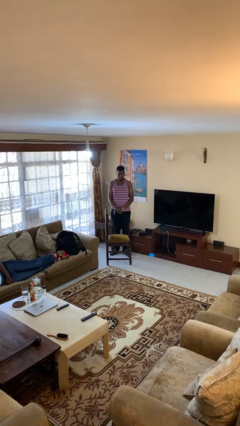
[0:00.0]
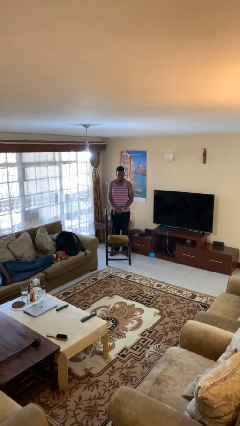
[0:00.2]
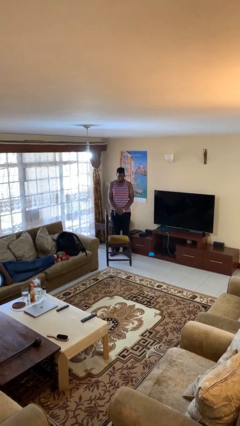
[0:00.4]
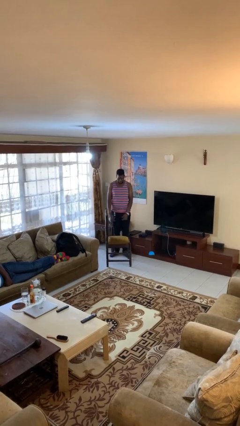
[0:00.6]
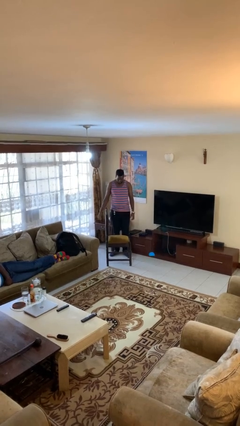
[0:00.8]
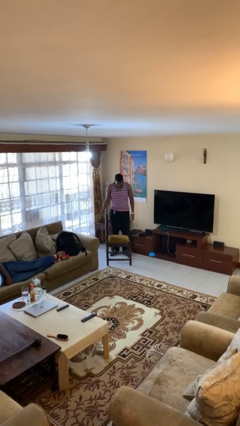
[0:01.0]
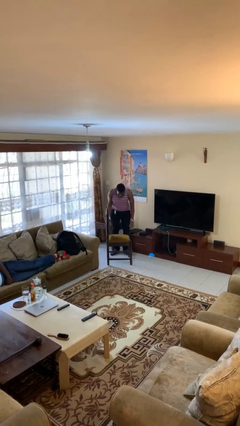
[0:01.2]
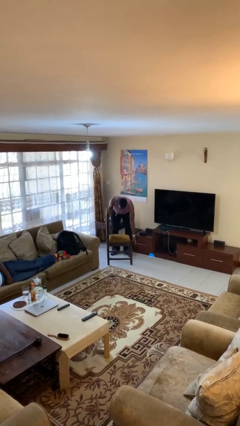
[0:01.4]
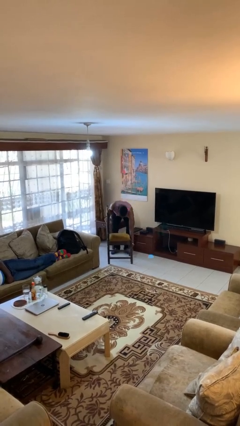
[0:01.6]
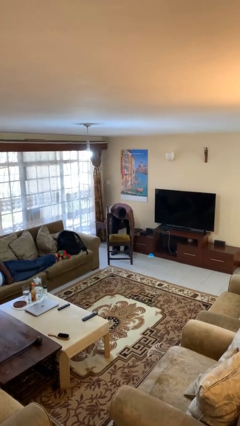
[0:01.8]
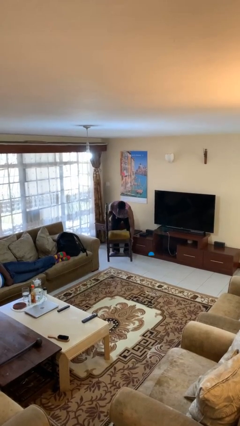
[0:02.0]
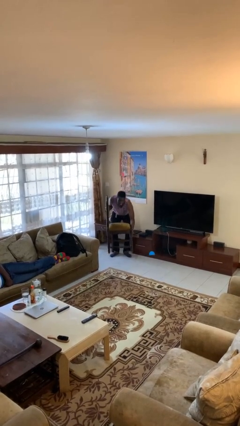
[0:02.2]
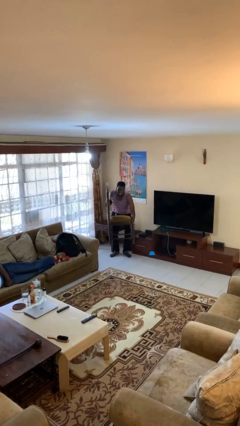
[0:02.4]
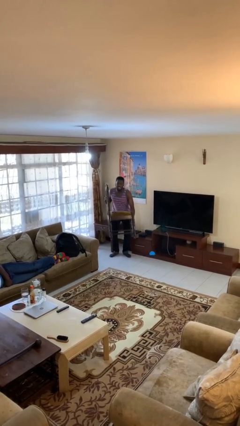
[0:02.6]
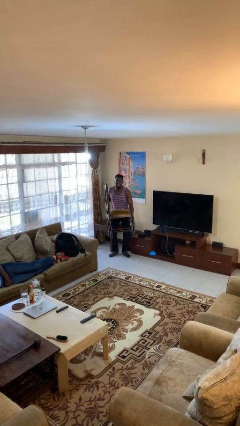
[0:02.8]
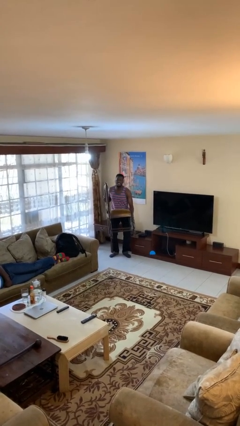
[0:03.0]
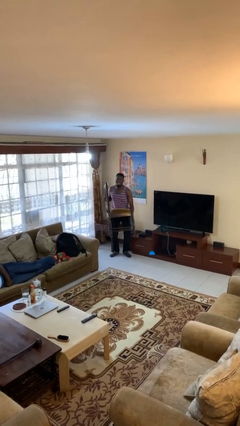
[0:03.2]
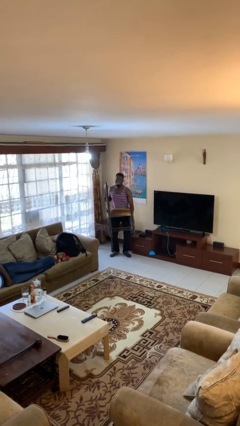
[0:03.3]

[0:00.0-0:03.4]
person picks up object from floor

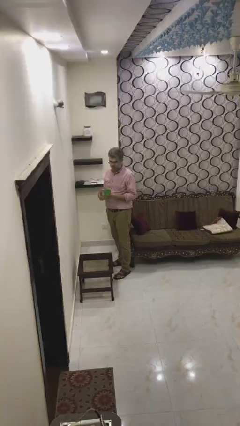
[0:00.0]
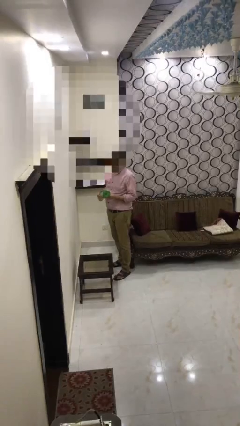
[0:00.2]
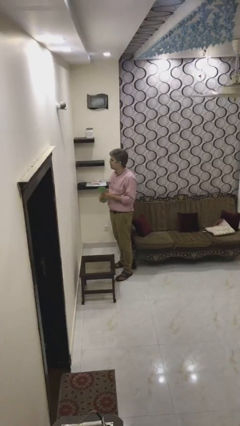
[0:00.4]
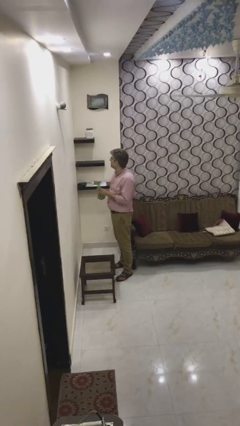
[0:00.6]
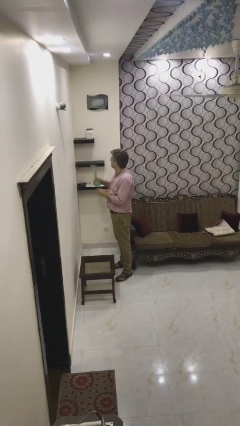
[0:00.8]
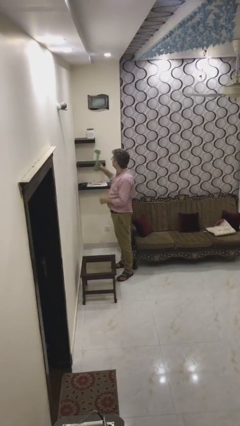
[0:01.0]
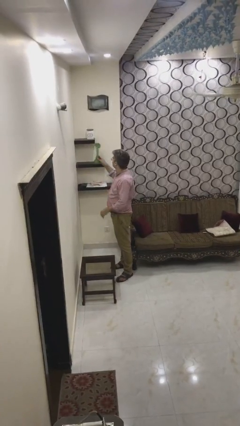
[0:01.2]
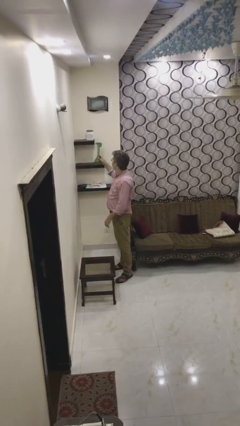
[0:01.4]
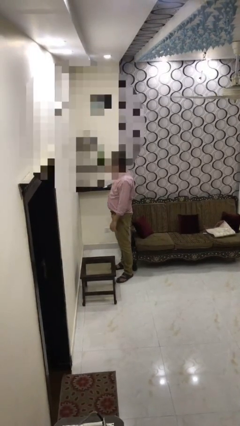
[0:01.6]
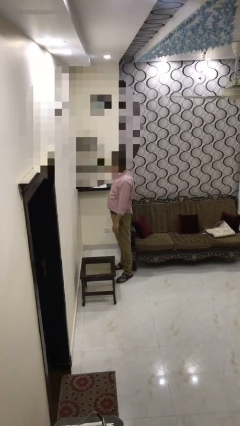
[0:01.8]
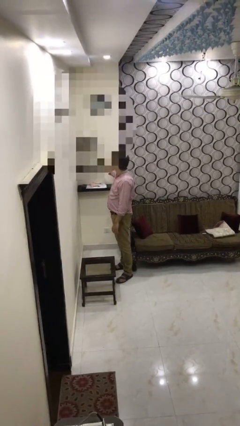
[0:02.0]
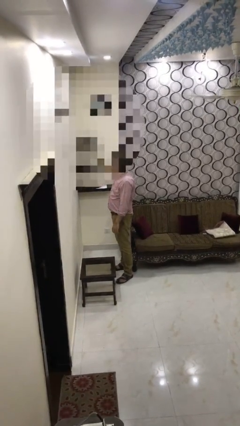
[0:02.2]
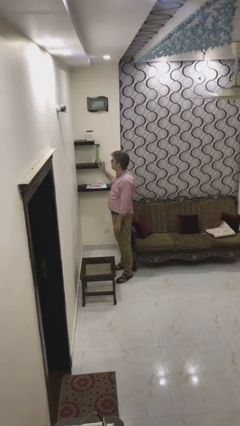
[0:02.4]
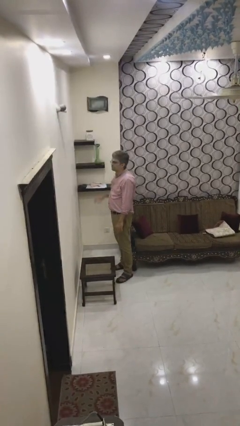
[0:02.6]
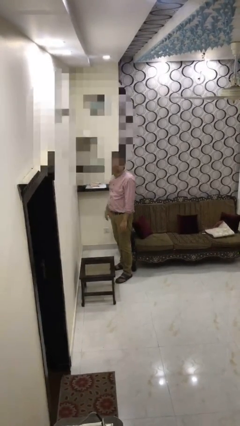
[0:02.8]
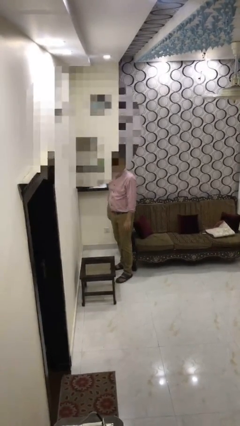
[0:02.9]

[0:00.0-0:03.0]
person puts down object on shelf

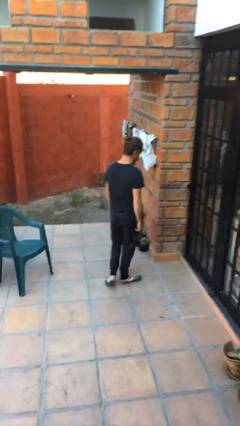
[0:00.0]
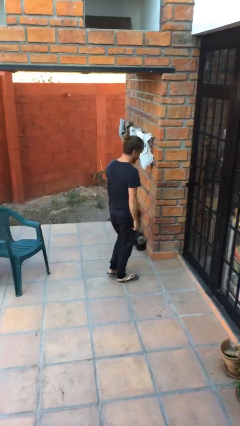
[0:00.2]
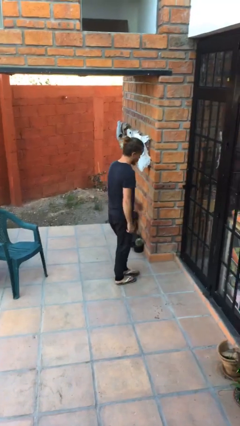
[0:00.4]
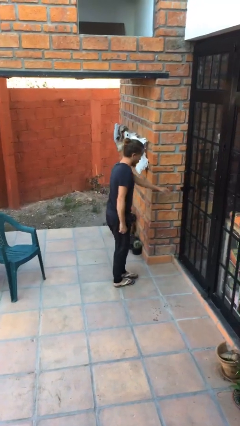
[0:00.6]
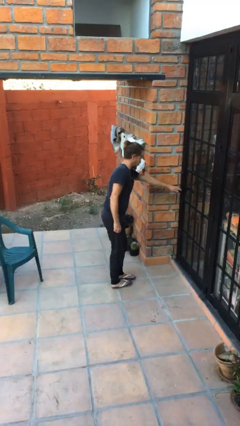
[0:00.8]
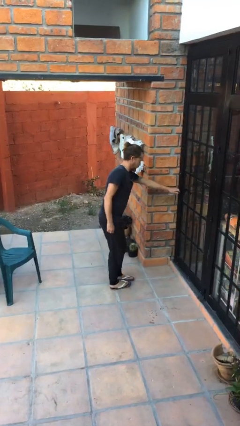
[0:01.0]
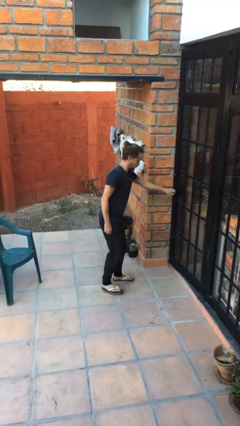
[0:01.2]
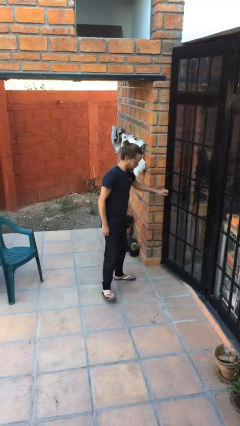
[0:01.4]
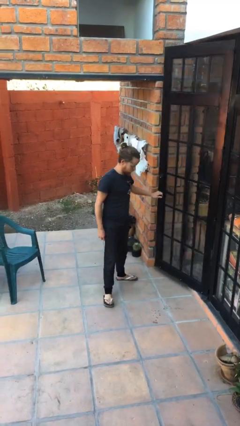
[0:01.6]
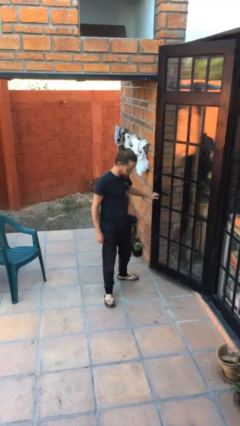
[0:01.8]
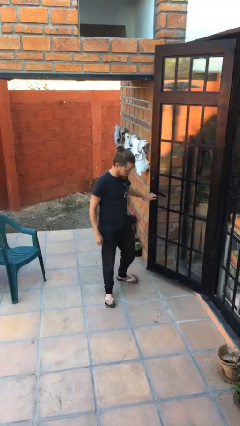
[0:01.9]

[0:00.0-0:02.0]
person opens facility door

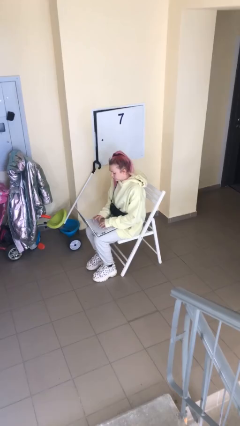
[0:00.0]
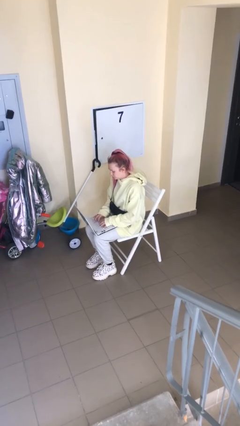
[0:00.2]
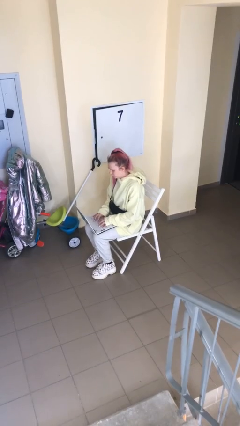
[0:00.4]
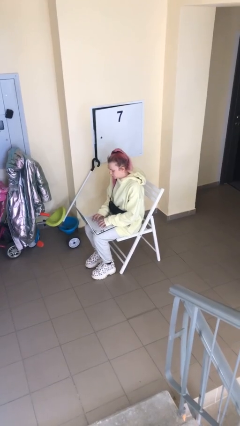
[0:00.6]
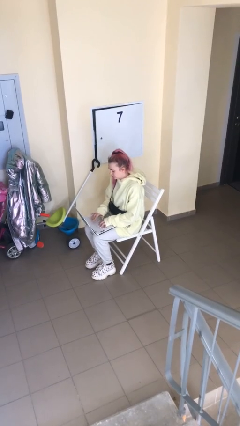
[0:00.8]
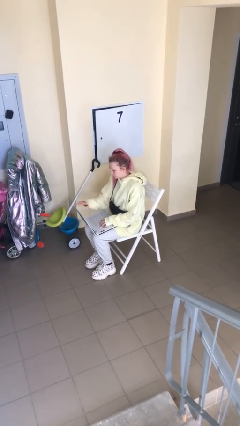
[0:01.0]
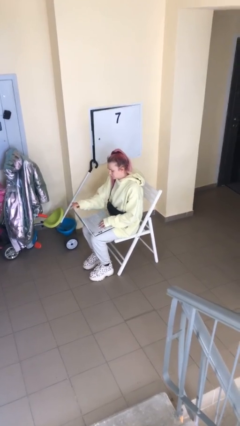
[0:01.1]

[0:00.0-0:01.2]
person interacts with laptop

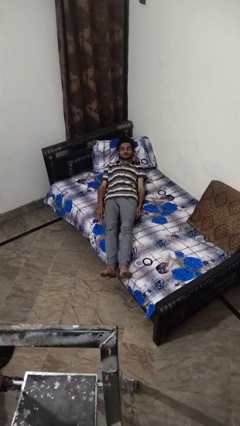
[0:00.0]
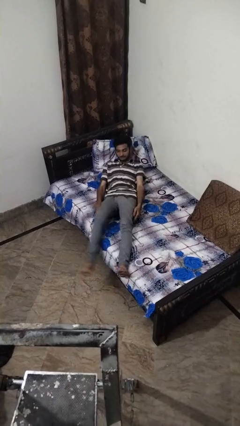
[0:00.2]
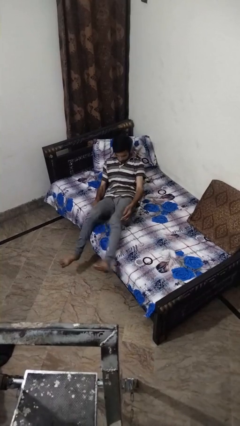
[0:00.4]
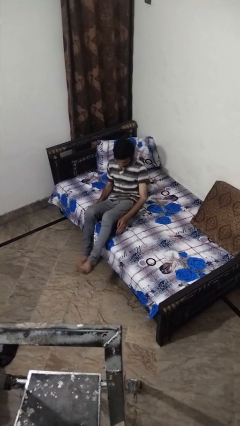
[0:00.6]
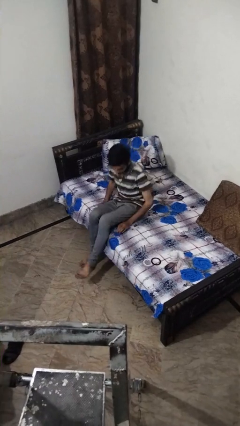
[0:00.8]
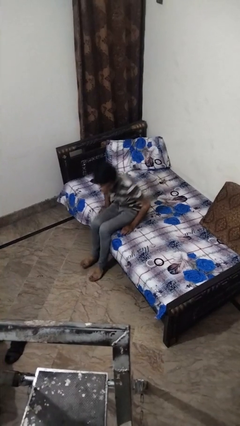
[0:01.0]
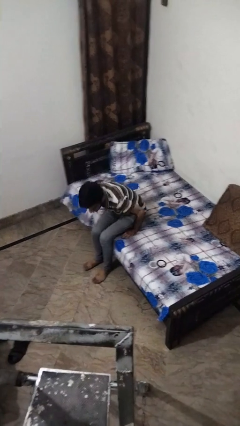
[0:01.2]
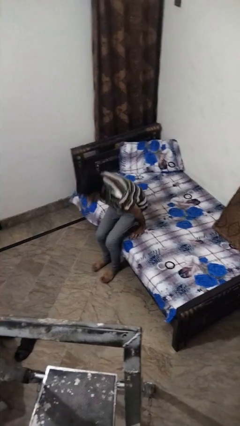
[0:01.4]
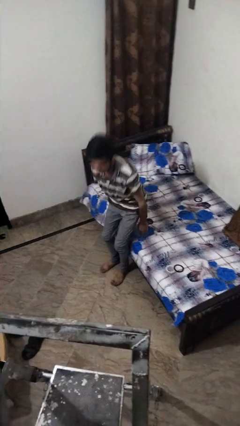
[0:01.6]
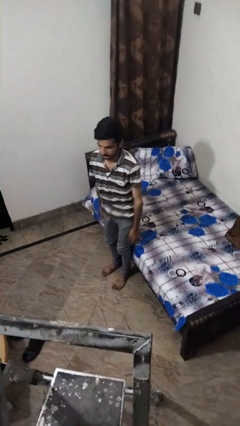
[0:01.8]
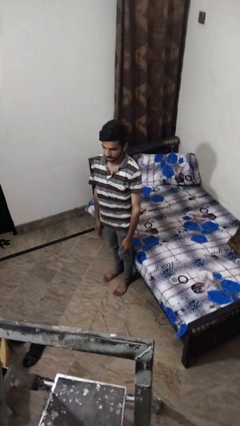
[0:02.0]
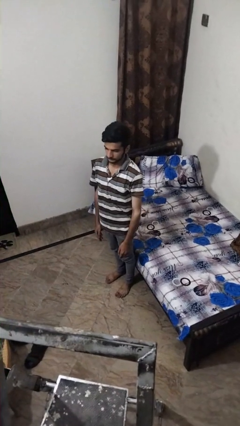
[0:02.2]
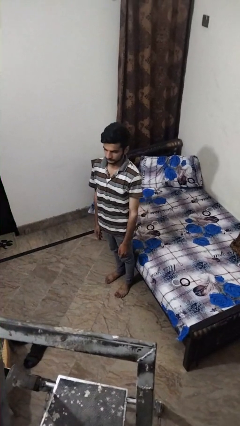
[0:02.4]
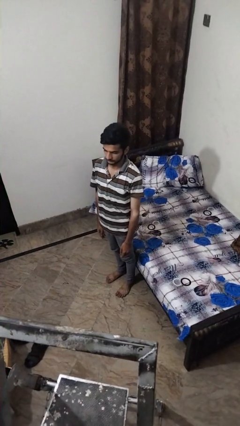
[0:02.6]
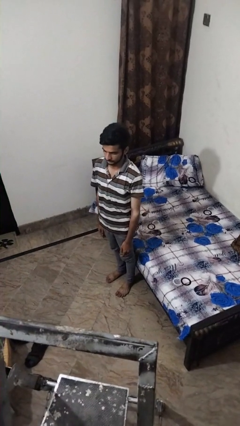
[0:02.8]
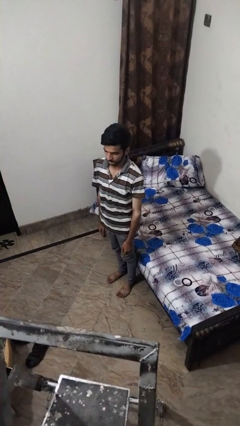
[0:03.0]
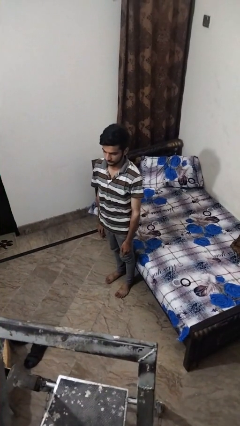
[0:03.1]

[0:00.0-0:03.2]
person stands up

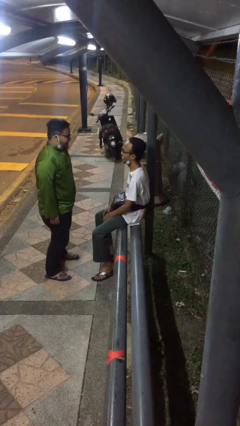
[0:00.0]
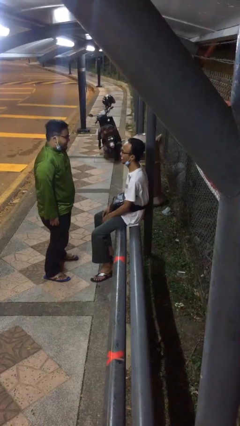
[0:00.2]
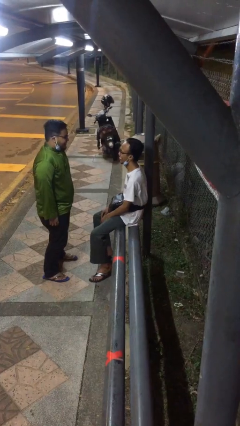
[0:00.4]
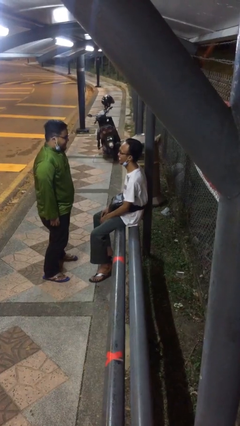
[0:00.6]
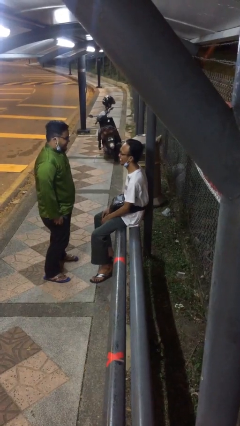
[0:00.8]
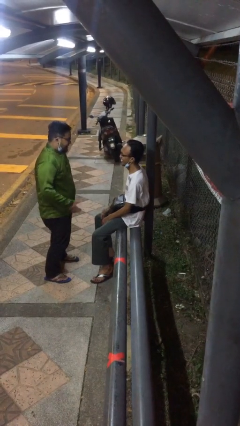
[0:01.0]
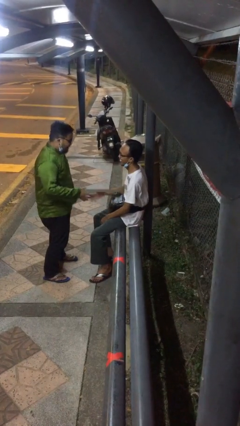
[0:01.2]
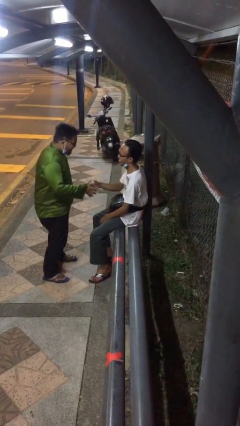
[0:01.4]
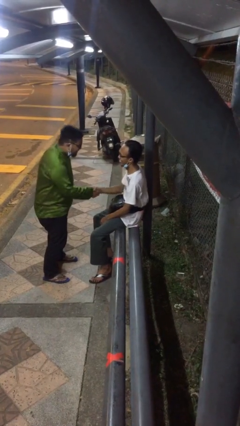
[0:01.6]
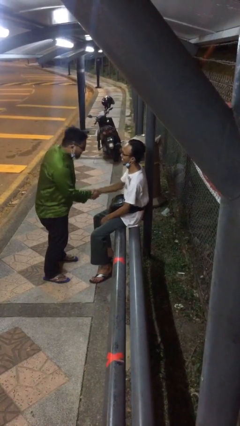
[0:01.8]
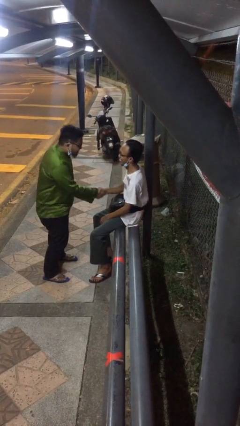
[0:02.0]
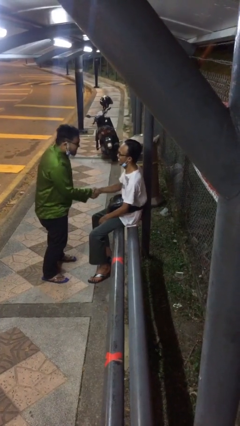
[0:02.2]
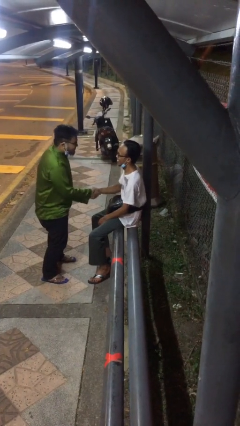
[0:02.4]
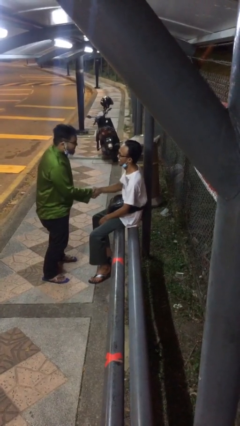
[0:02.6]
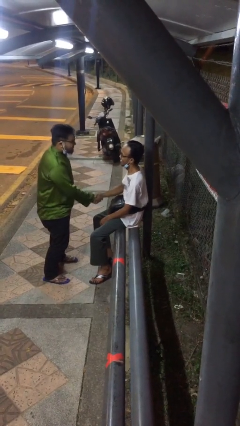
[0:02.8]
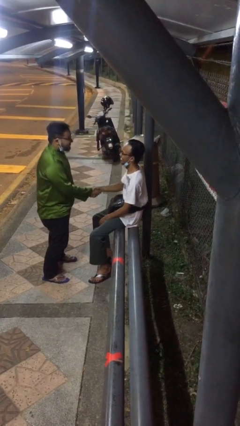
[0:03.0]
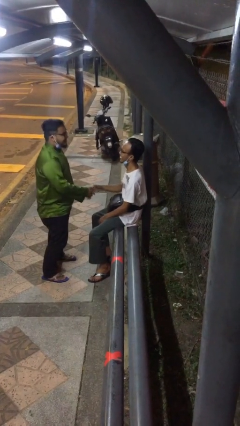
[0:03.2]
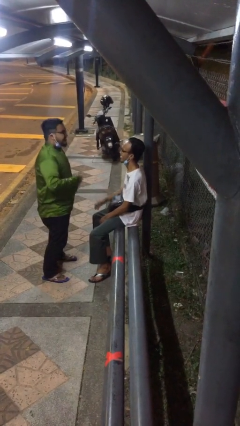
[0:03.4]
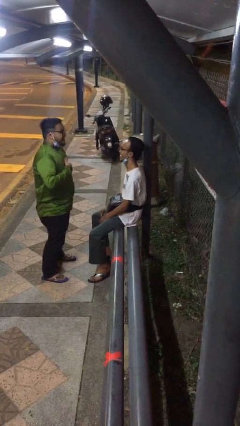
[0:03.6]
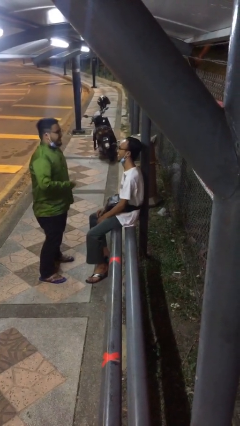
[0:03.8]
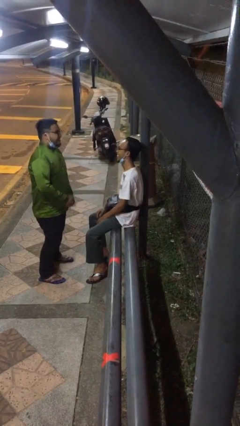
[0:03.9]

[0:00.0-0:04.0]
person shakes hand

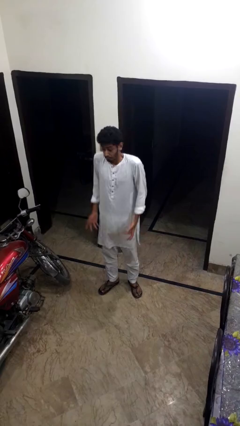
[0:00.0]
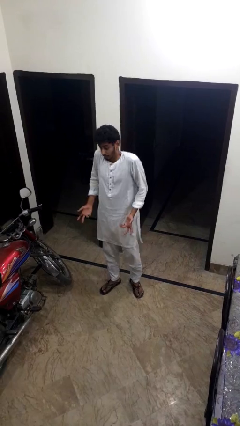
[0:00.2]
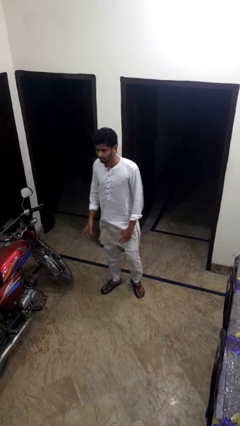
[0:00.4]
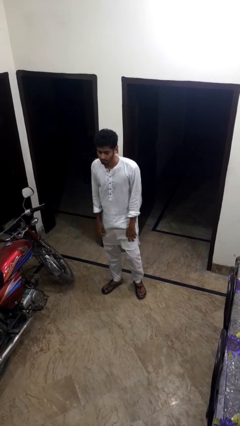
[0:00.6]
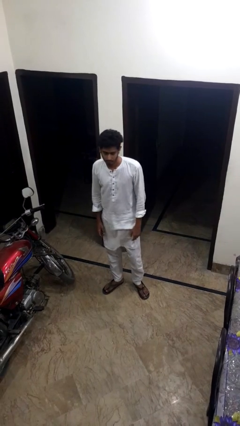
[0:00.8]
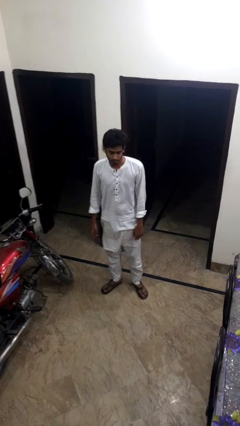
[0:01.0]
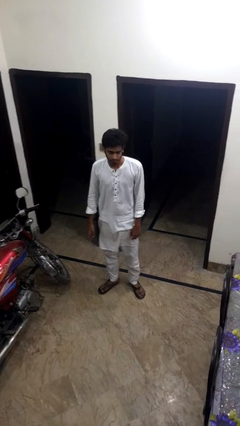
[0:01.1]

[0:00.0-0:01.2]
person shrugs
